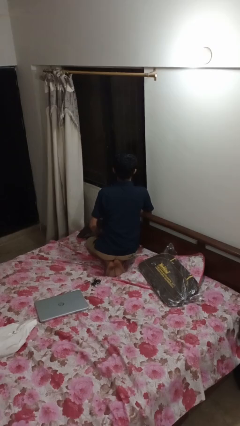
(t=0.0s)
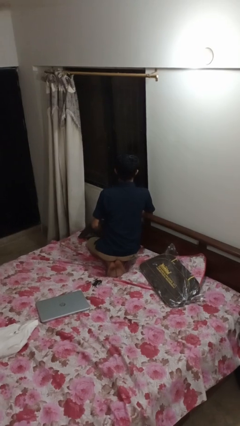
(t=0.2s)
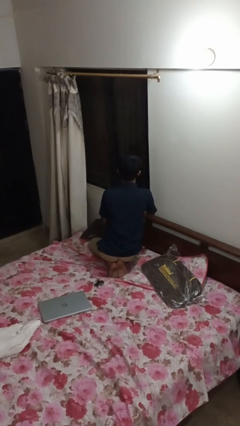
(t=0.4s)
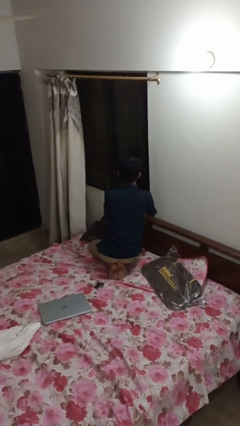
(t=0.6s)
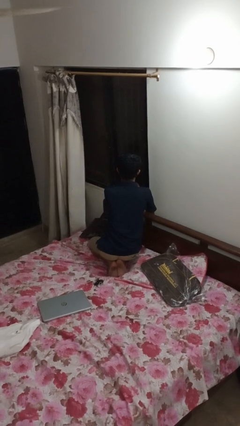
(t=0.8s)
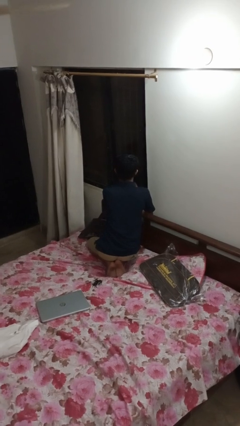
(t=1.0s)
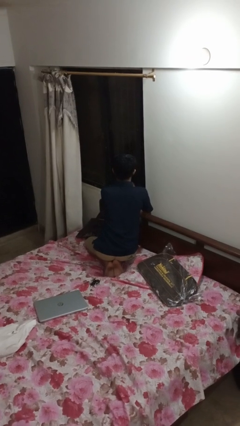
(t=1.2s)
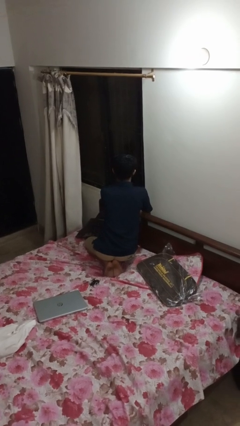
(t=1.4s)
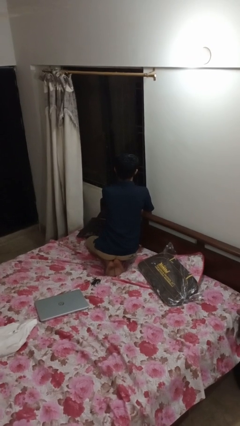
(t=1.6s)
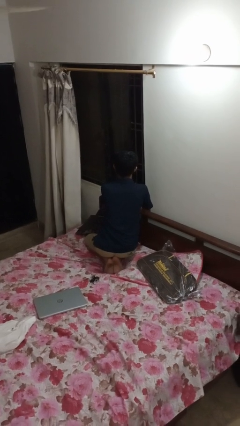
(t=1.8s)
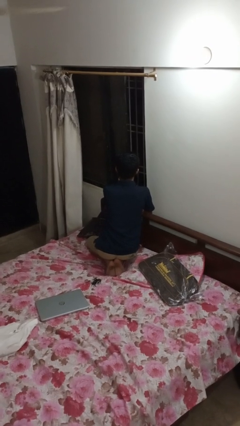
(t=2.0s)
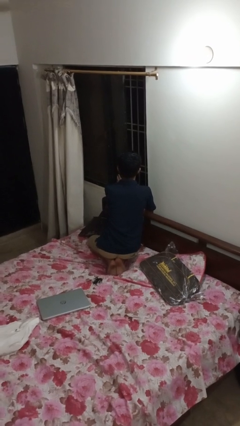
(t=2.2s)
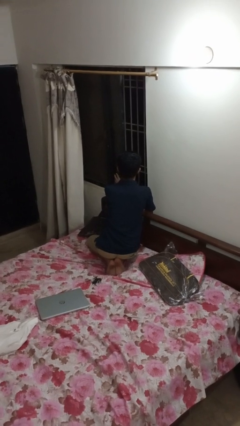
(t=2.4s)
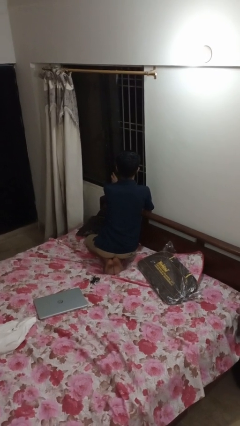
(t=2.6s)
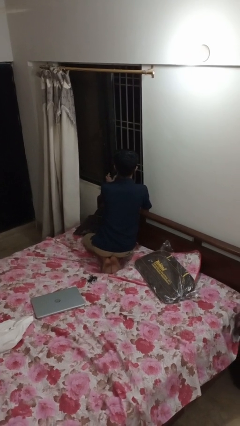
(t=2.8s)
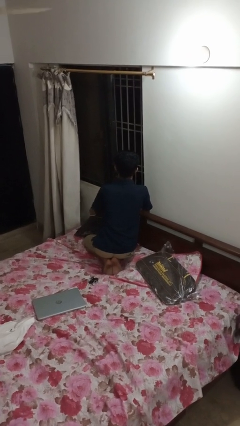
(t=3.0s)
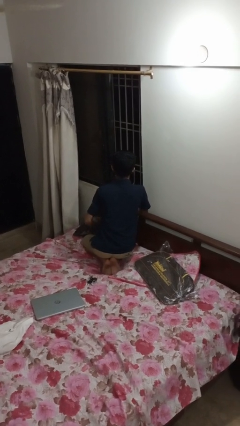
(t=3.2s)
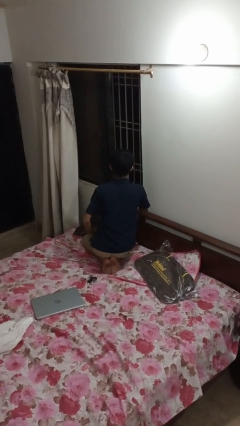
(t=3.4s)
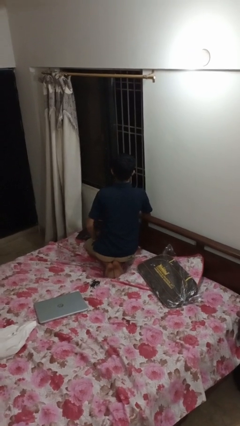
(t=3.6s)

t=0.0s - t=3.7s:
person opens home window

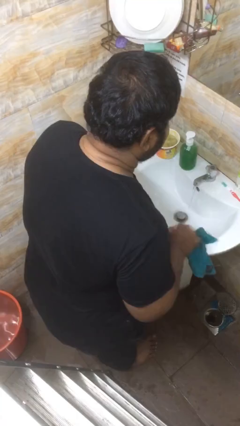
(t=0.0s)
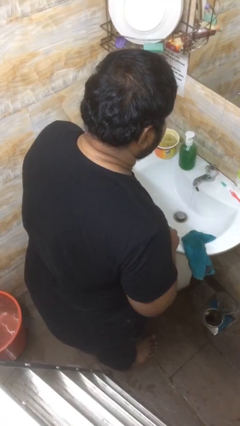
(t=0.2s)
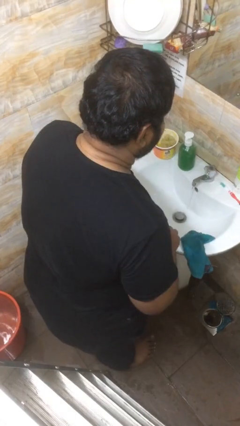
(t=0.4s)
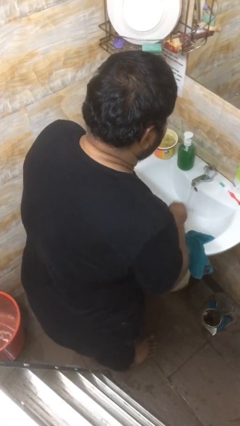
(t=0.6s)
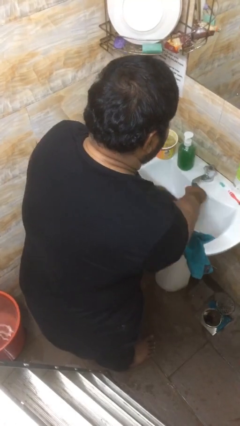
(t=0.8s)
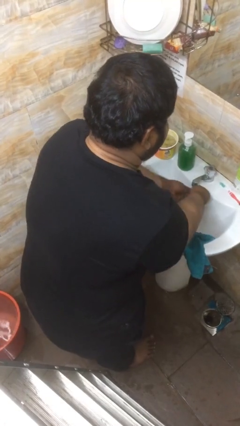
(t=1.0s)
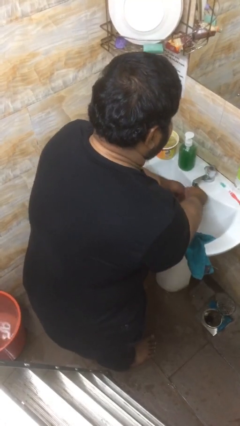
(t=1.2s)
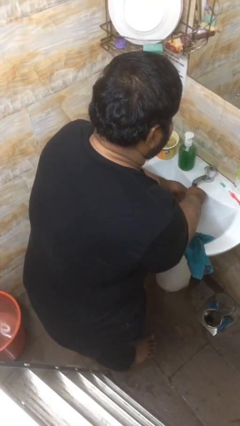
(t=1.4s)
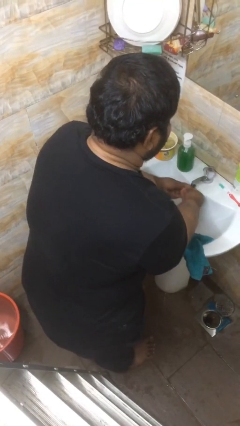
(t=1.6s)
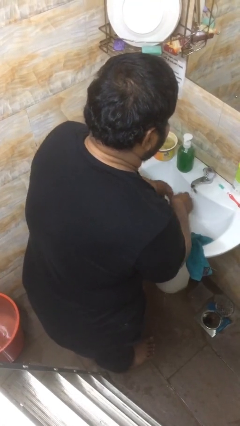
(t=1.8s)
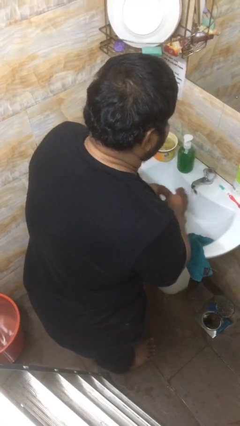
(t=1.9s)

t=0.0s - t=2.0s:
person washes hands

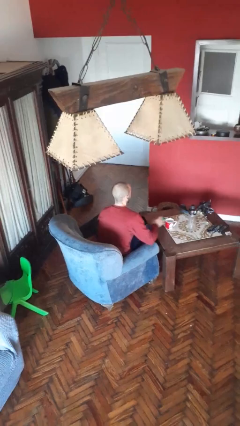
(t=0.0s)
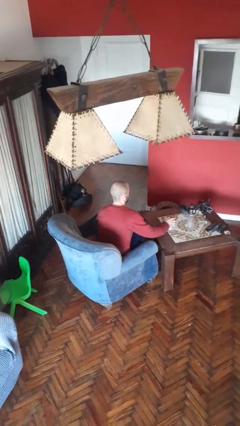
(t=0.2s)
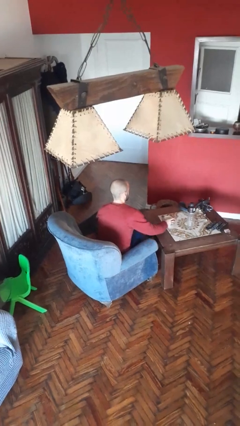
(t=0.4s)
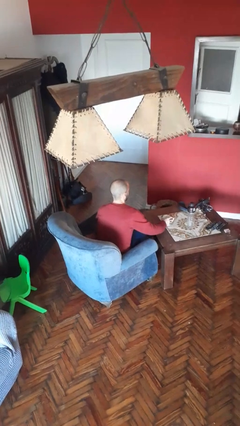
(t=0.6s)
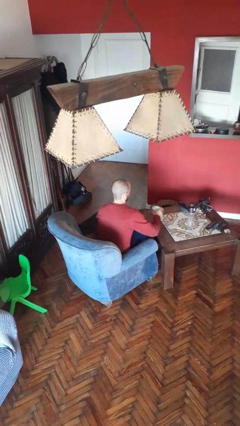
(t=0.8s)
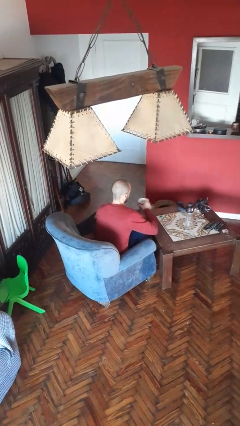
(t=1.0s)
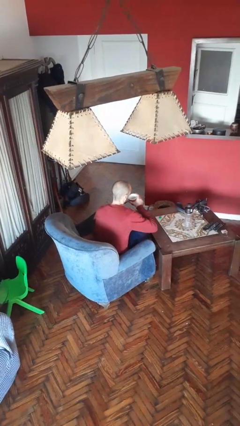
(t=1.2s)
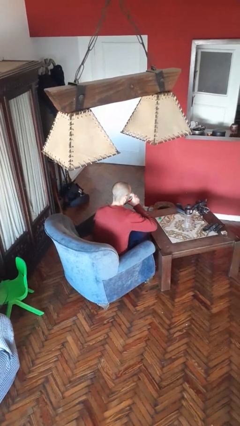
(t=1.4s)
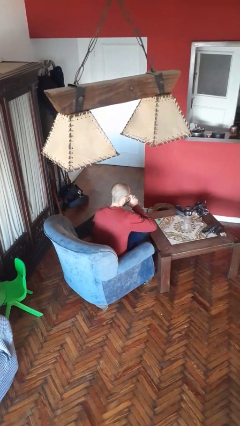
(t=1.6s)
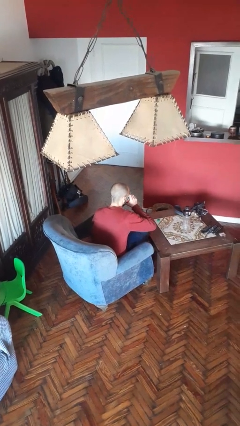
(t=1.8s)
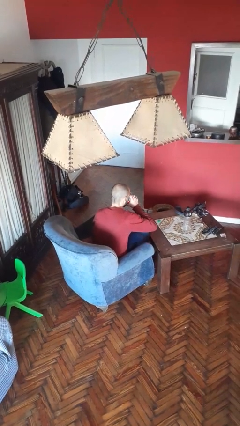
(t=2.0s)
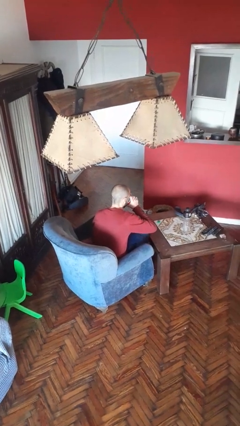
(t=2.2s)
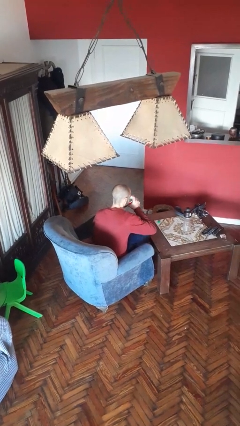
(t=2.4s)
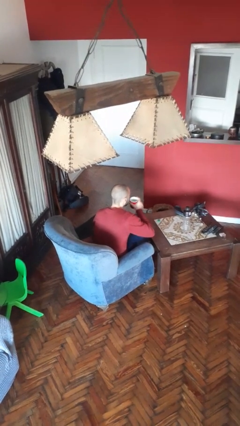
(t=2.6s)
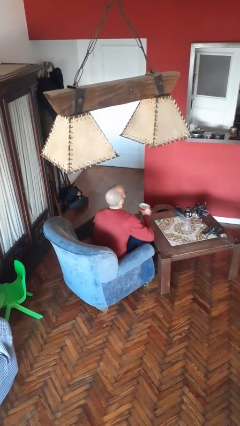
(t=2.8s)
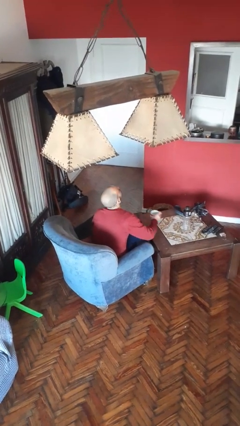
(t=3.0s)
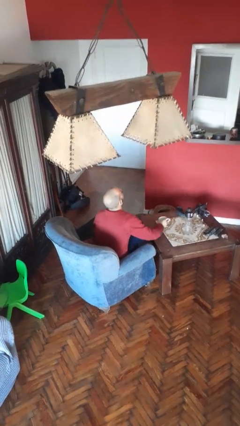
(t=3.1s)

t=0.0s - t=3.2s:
person drinks from cup

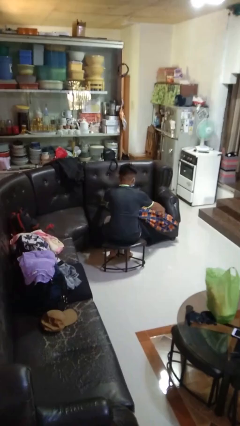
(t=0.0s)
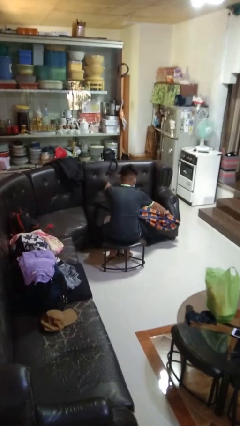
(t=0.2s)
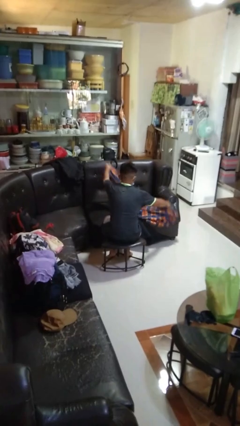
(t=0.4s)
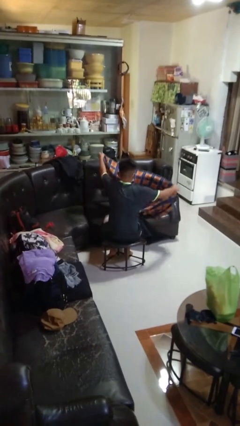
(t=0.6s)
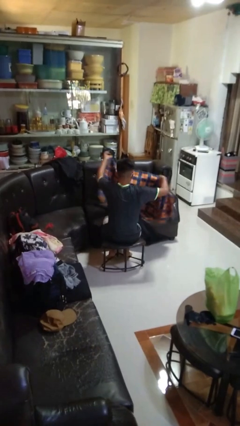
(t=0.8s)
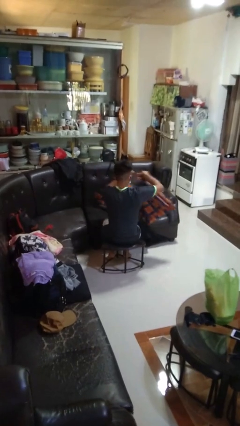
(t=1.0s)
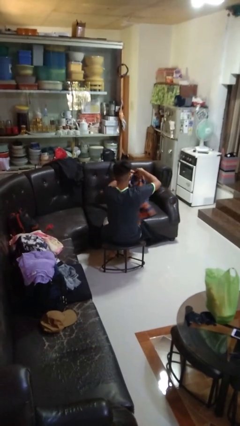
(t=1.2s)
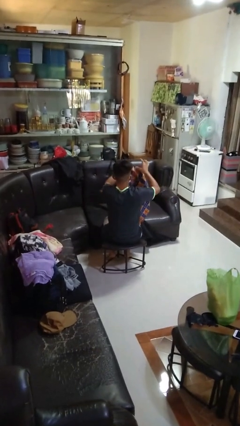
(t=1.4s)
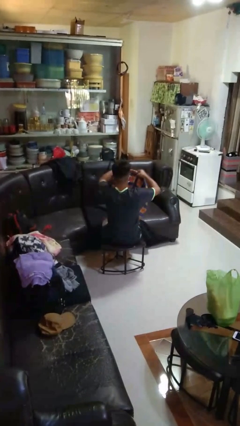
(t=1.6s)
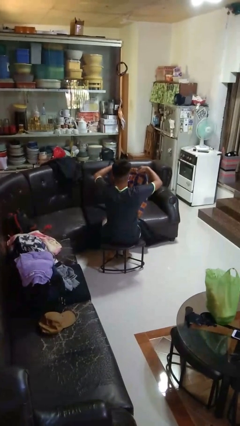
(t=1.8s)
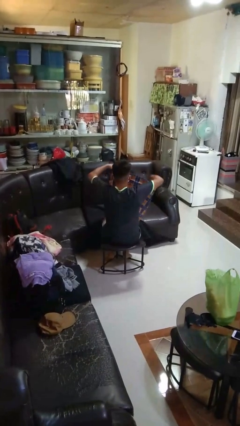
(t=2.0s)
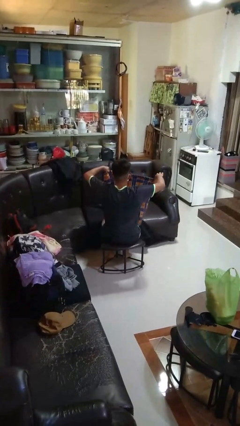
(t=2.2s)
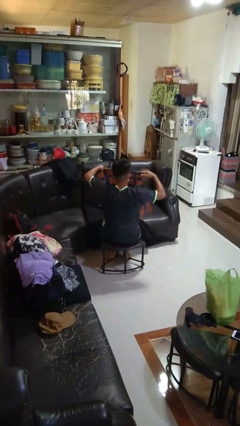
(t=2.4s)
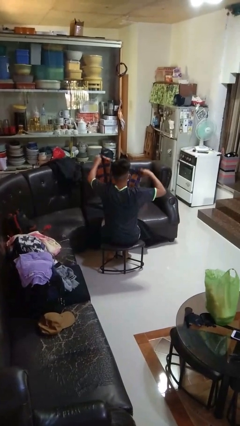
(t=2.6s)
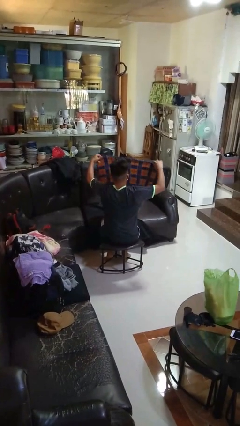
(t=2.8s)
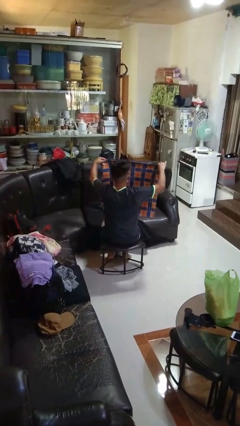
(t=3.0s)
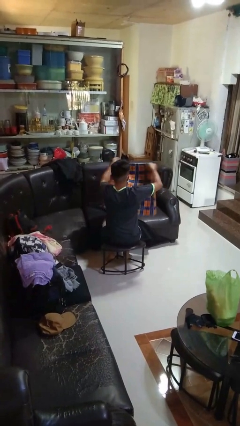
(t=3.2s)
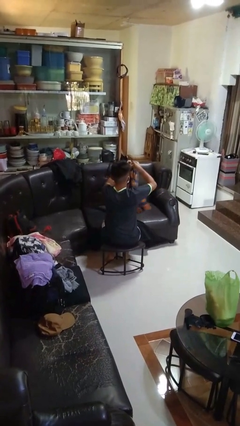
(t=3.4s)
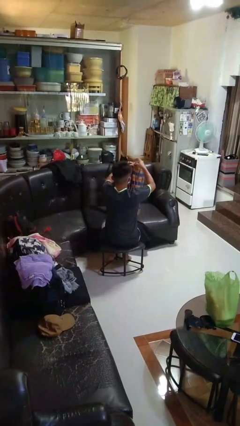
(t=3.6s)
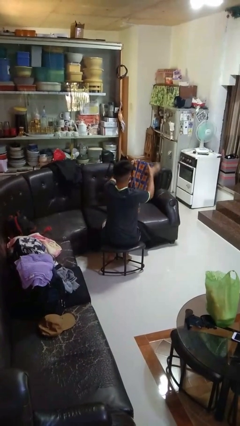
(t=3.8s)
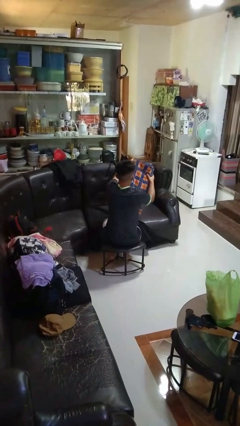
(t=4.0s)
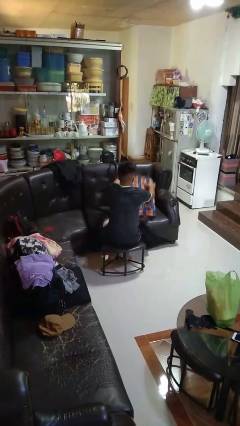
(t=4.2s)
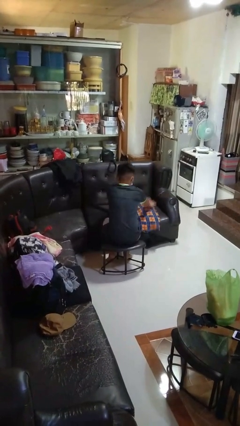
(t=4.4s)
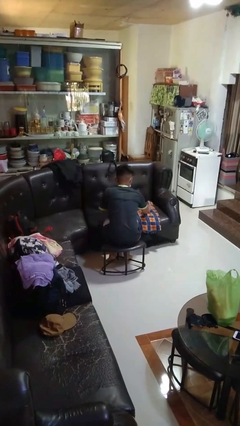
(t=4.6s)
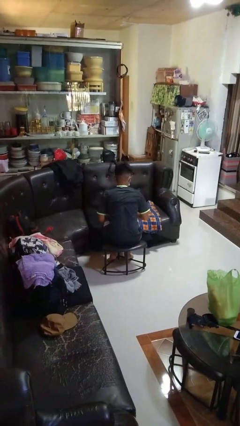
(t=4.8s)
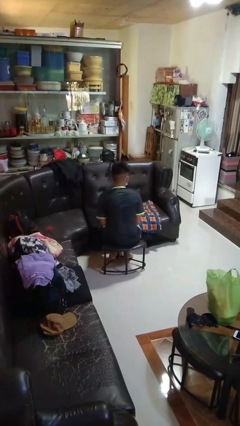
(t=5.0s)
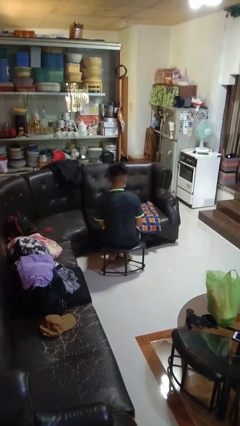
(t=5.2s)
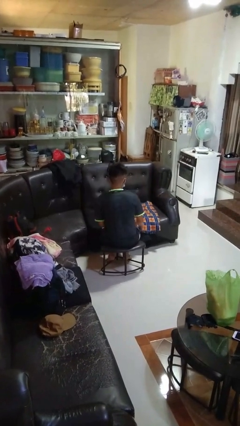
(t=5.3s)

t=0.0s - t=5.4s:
person folds blanket

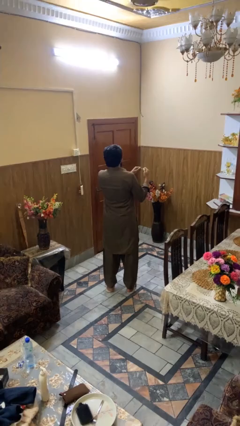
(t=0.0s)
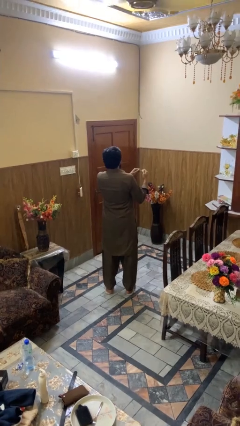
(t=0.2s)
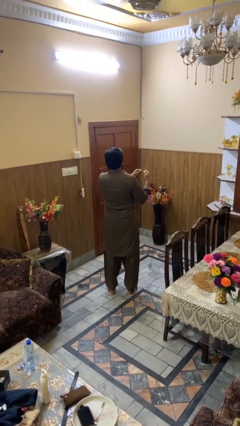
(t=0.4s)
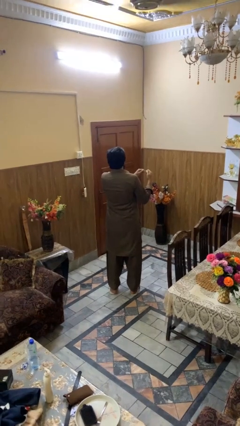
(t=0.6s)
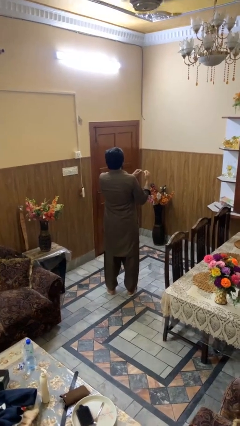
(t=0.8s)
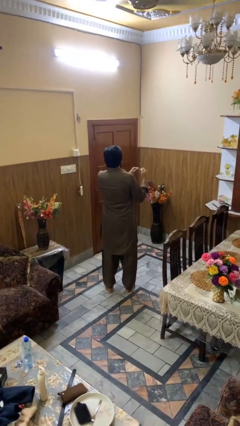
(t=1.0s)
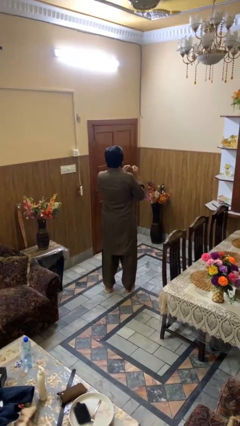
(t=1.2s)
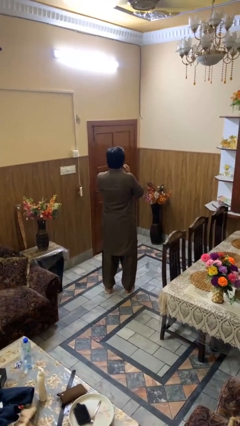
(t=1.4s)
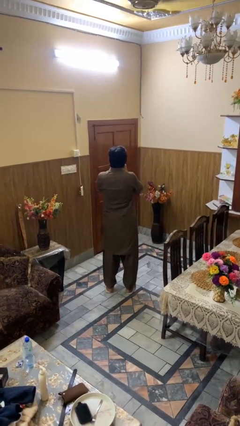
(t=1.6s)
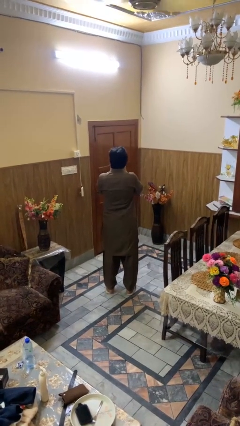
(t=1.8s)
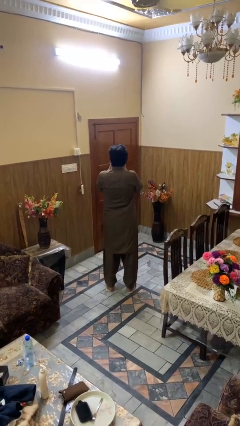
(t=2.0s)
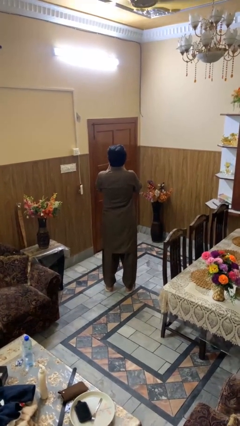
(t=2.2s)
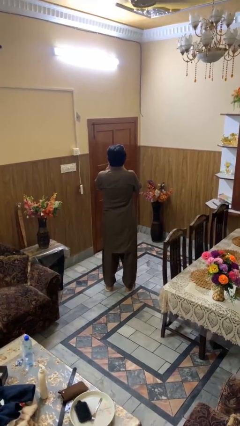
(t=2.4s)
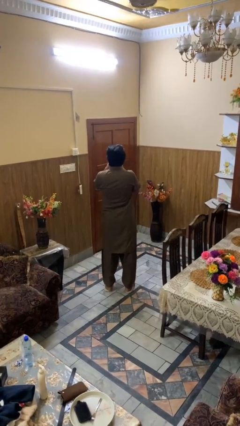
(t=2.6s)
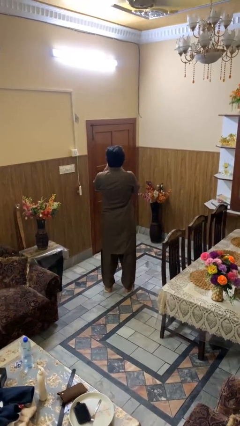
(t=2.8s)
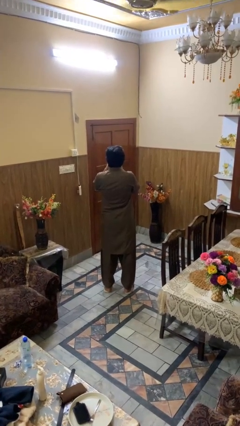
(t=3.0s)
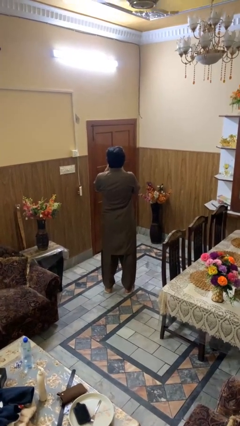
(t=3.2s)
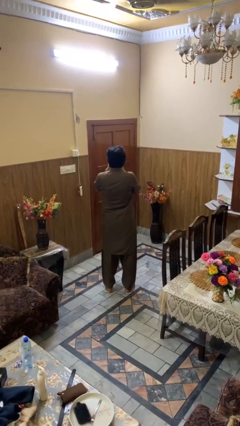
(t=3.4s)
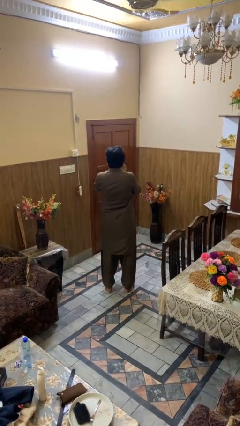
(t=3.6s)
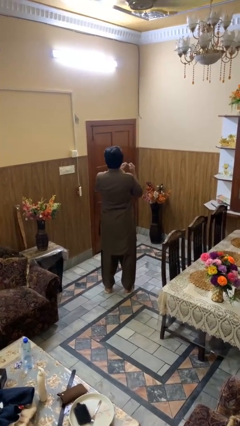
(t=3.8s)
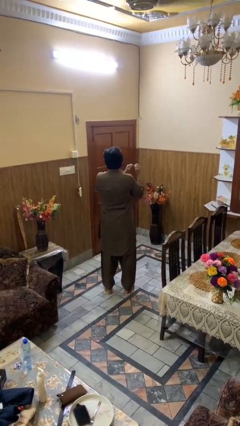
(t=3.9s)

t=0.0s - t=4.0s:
person flosses
